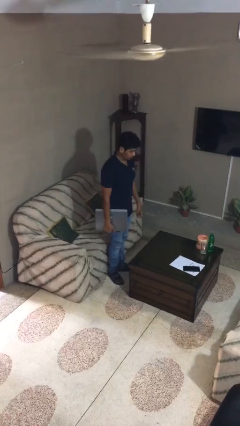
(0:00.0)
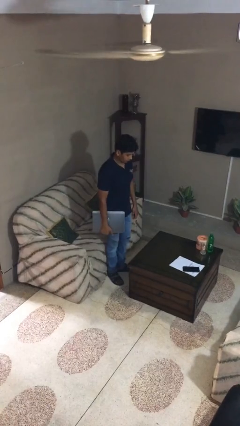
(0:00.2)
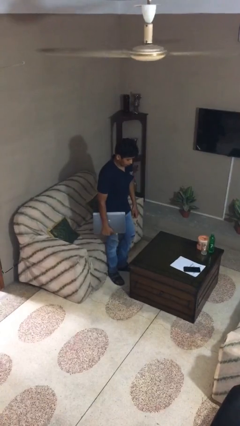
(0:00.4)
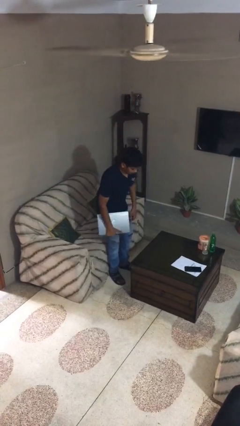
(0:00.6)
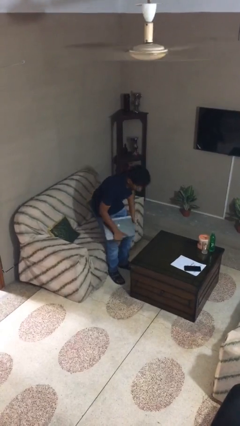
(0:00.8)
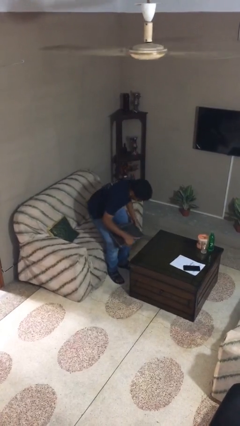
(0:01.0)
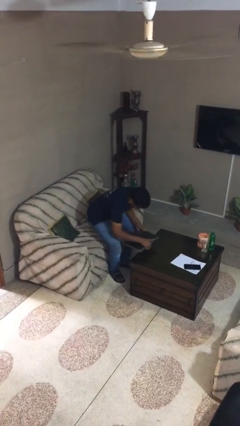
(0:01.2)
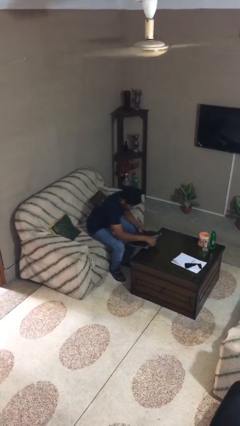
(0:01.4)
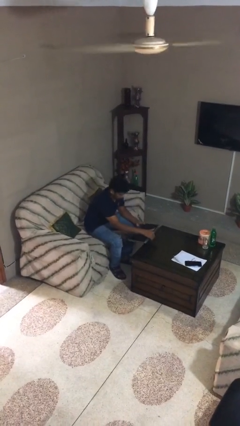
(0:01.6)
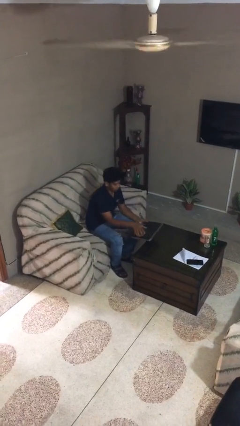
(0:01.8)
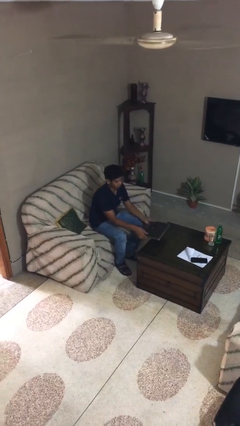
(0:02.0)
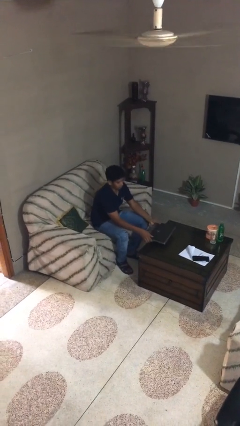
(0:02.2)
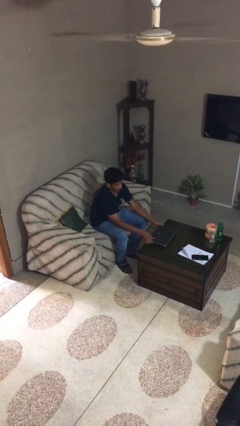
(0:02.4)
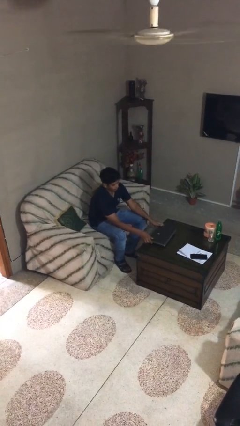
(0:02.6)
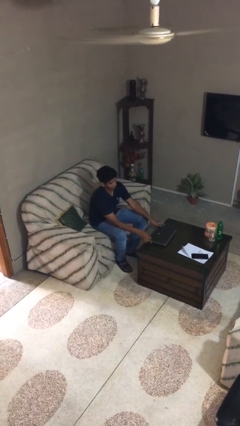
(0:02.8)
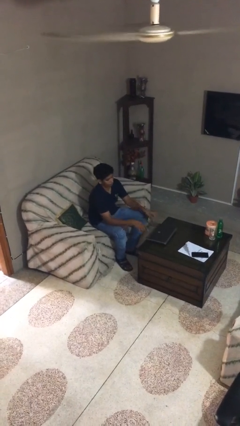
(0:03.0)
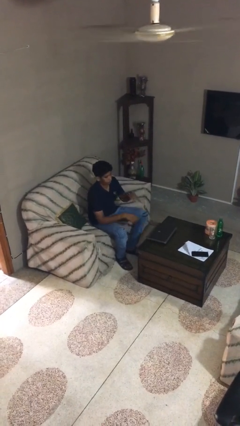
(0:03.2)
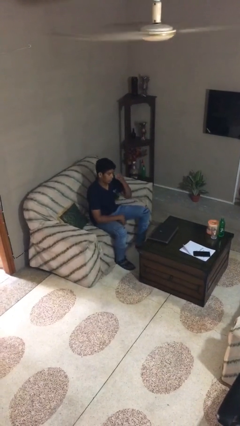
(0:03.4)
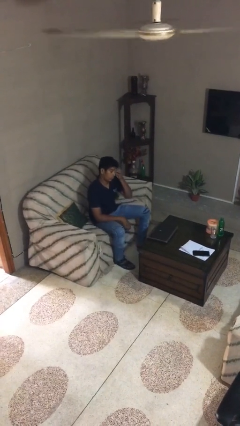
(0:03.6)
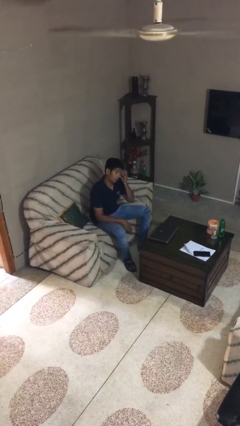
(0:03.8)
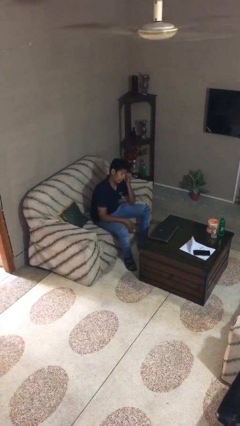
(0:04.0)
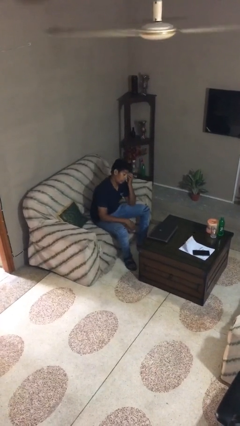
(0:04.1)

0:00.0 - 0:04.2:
person sits down

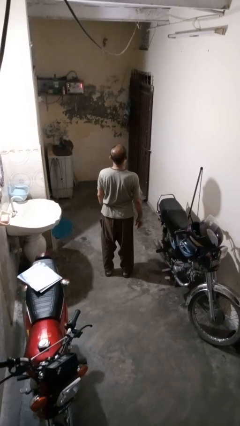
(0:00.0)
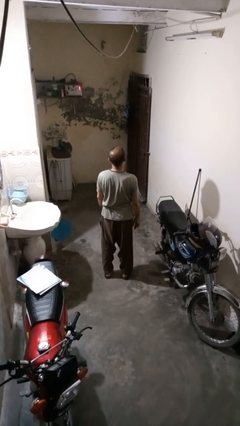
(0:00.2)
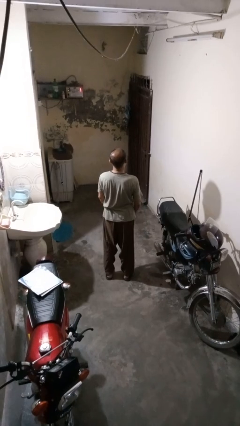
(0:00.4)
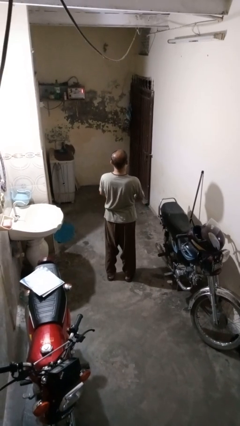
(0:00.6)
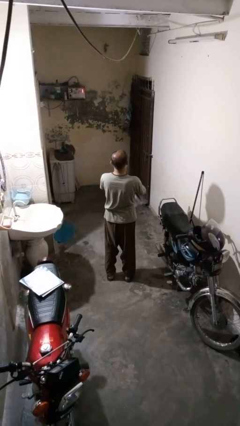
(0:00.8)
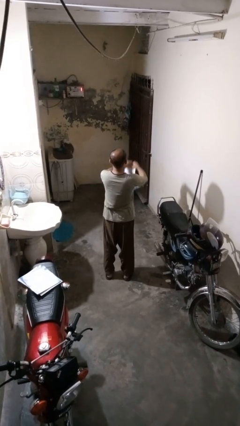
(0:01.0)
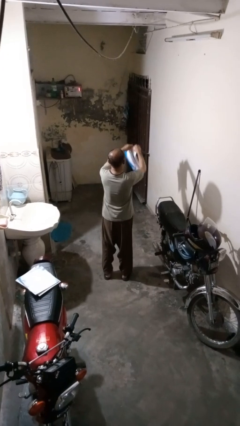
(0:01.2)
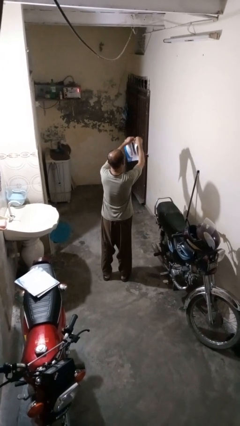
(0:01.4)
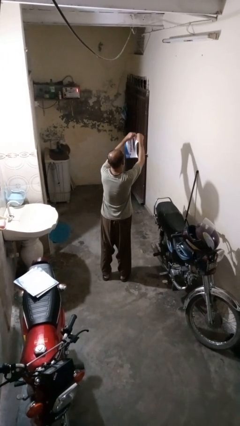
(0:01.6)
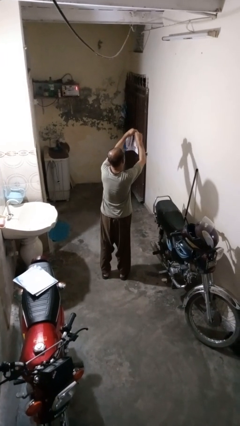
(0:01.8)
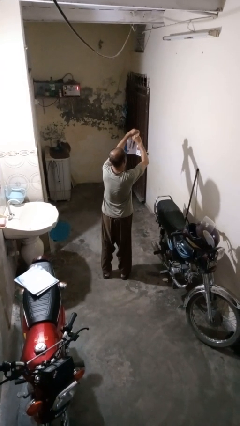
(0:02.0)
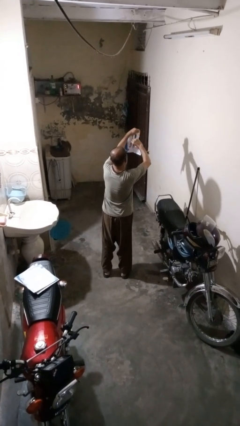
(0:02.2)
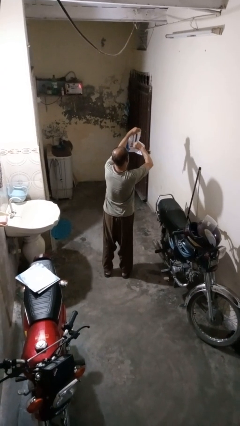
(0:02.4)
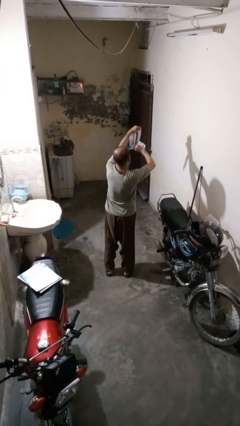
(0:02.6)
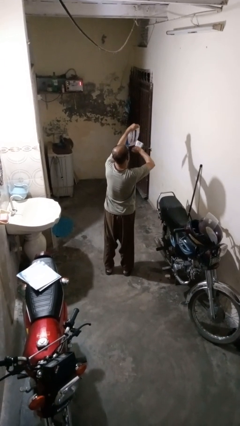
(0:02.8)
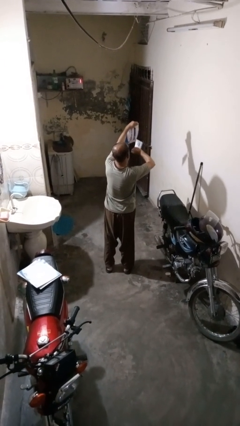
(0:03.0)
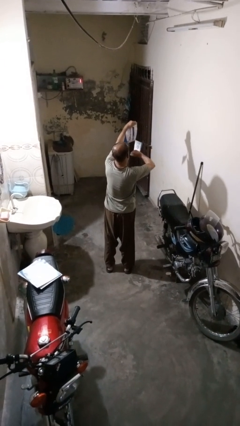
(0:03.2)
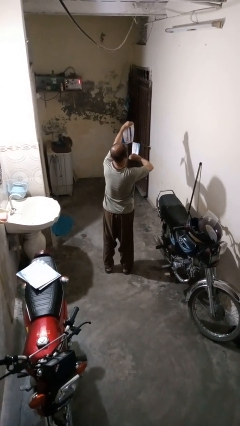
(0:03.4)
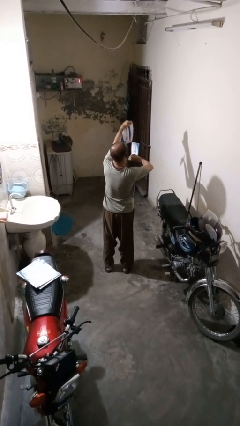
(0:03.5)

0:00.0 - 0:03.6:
person tears paper

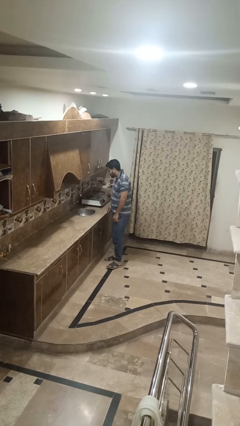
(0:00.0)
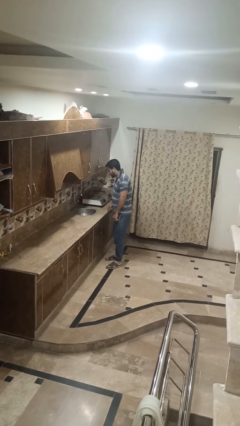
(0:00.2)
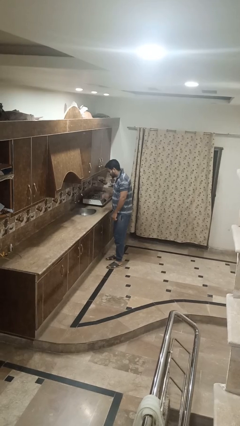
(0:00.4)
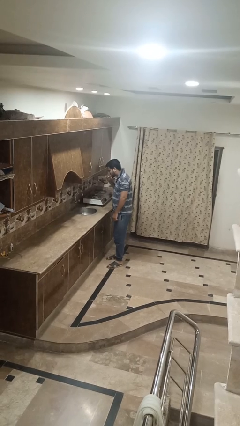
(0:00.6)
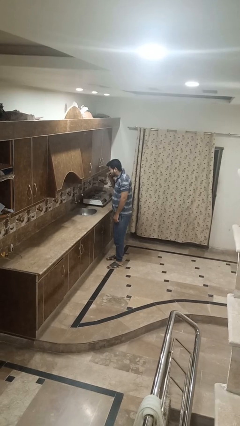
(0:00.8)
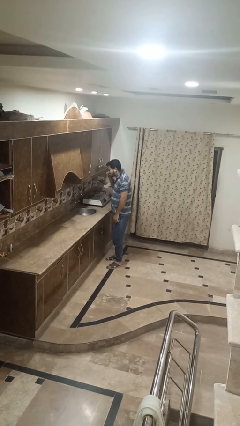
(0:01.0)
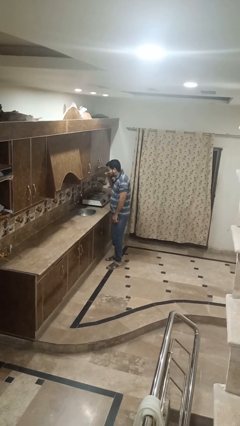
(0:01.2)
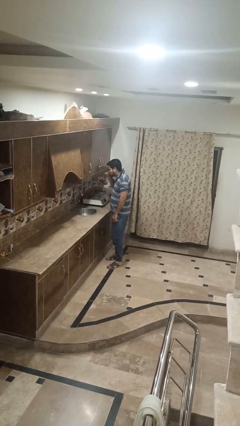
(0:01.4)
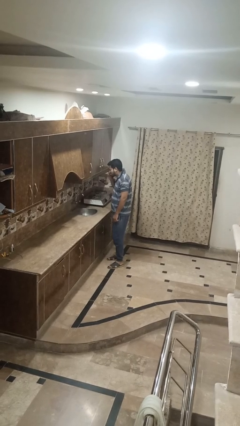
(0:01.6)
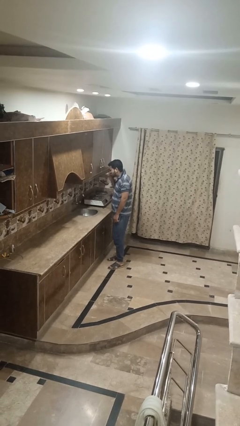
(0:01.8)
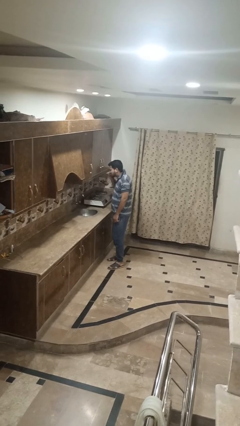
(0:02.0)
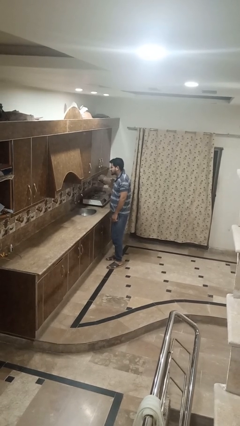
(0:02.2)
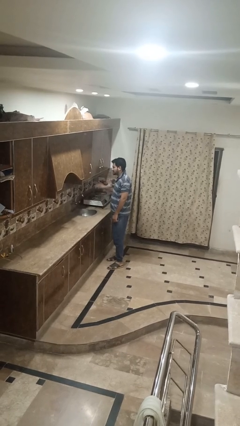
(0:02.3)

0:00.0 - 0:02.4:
person brushes teeth

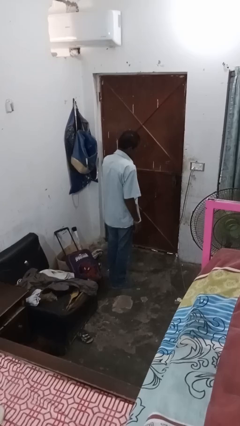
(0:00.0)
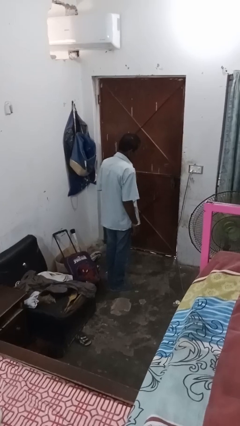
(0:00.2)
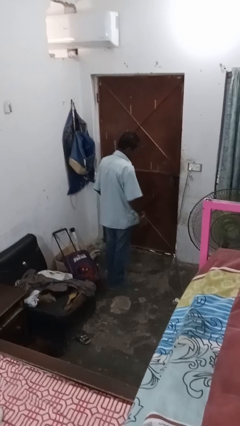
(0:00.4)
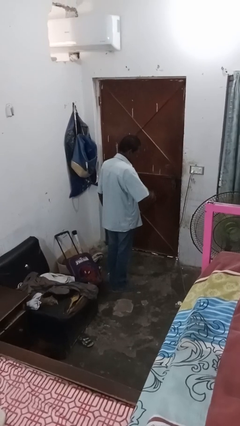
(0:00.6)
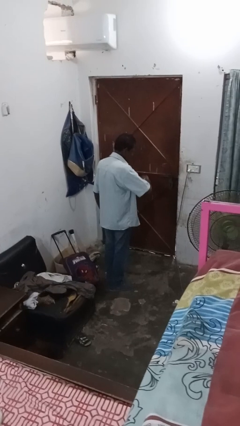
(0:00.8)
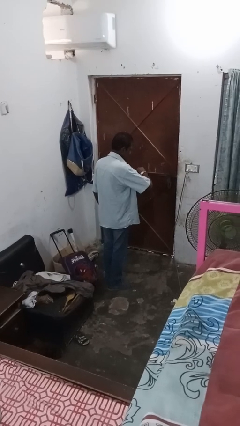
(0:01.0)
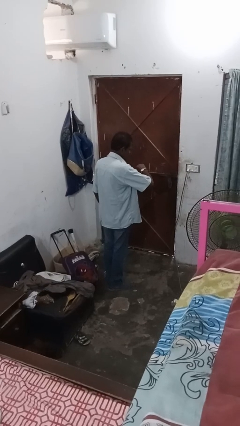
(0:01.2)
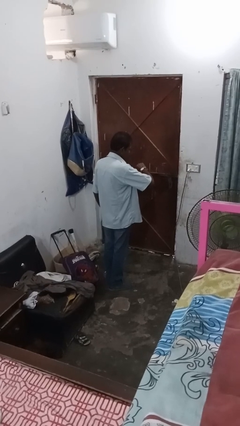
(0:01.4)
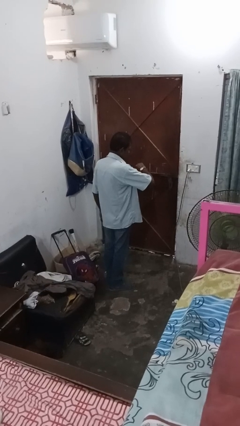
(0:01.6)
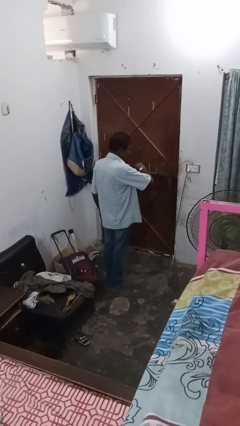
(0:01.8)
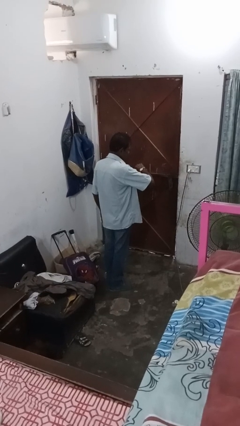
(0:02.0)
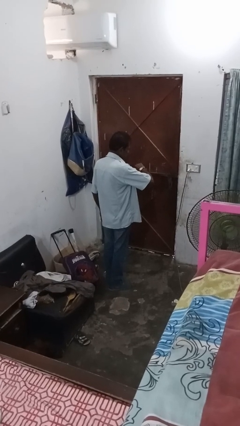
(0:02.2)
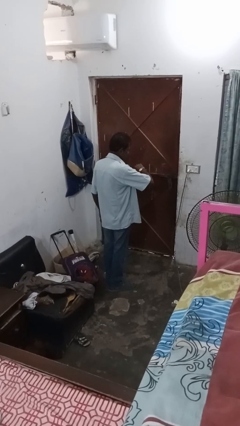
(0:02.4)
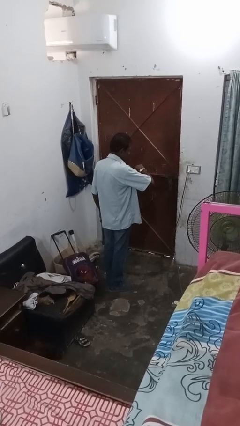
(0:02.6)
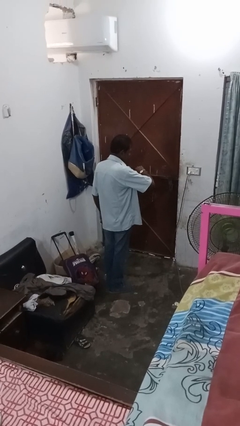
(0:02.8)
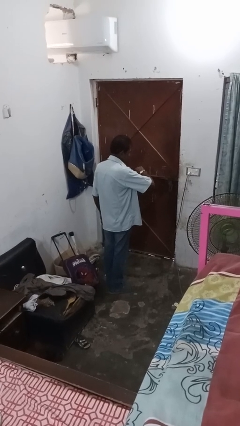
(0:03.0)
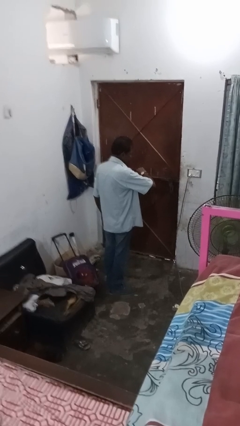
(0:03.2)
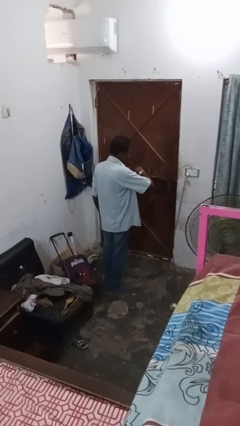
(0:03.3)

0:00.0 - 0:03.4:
person puts on wristwatch

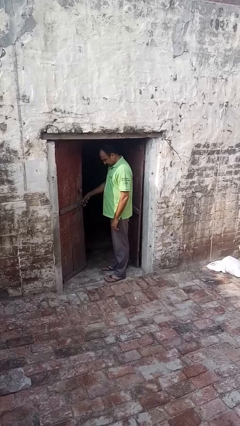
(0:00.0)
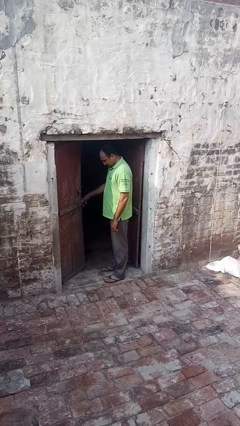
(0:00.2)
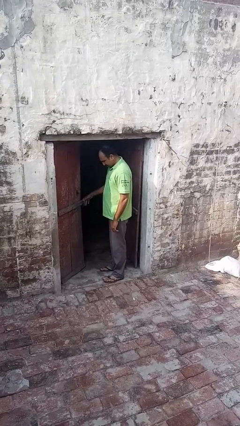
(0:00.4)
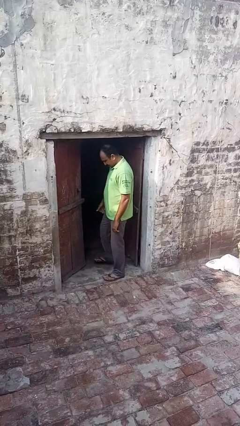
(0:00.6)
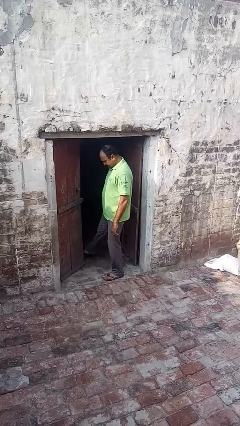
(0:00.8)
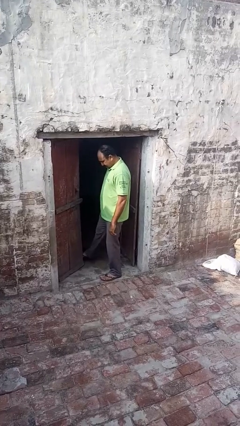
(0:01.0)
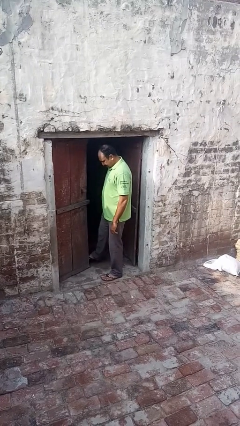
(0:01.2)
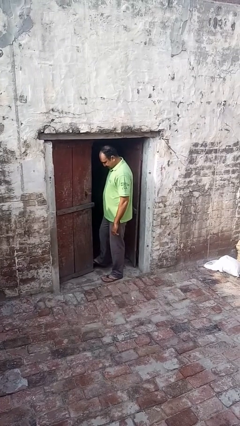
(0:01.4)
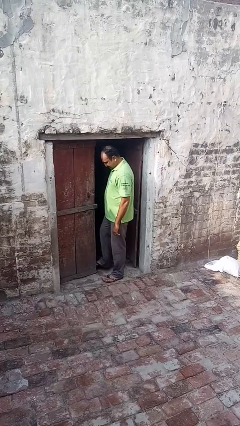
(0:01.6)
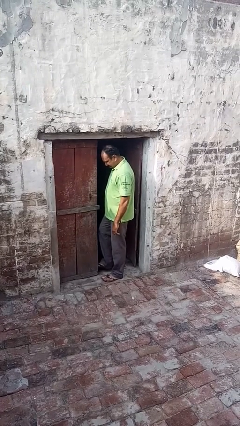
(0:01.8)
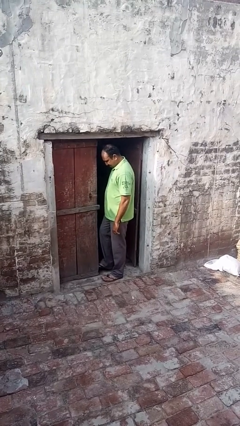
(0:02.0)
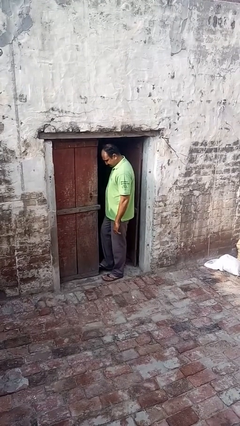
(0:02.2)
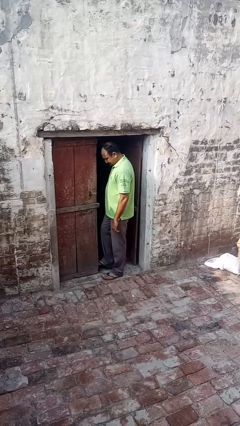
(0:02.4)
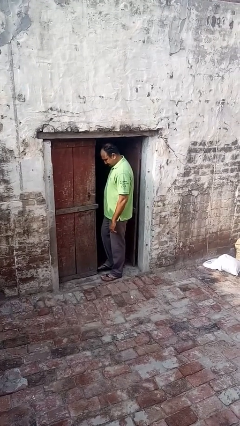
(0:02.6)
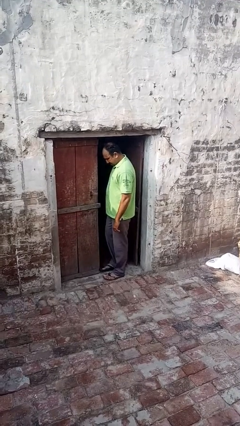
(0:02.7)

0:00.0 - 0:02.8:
person closes door with foot

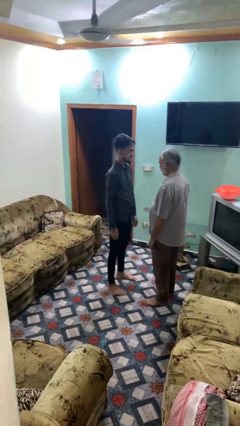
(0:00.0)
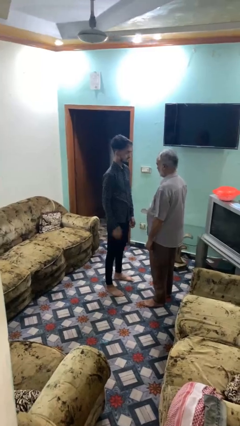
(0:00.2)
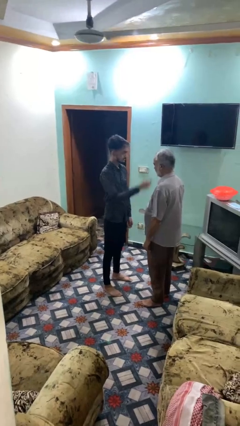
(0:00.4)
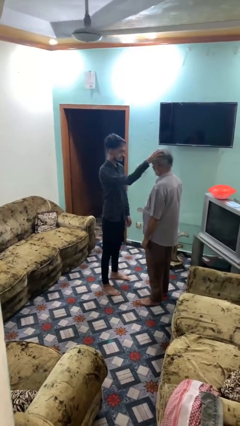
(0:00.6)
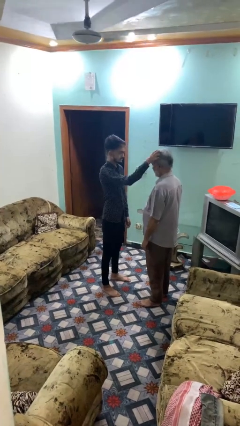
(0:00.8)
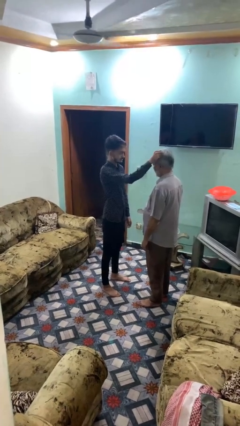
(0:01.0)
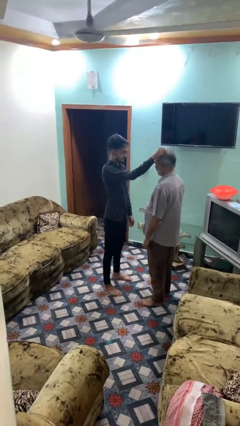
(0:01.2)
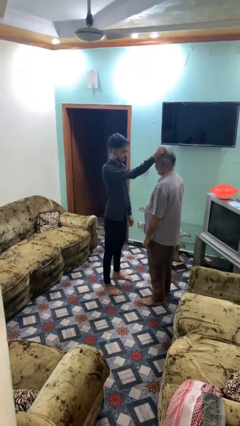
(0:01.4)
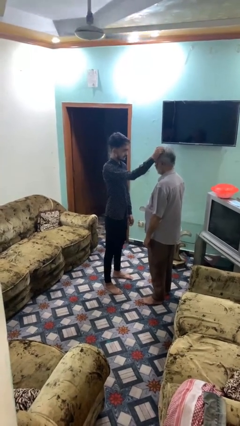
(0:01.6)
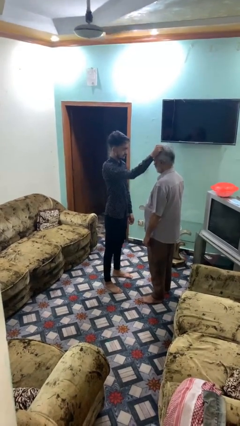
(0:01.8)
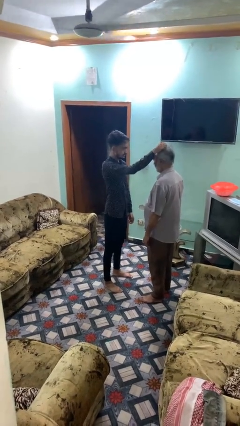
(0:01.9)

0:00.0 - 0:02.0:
person grabs person by hair
